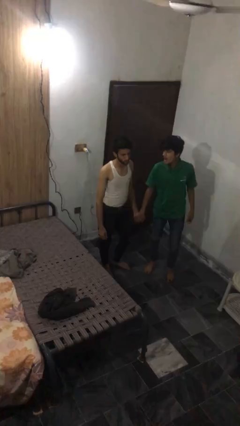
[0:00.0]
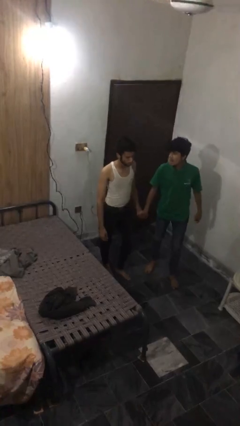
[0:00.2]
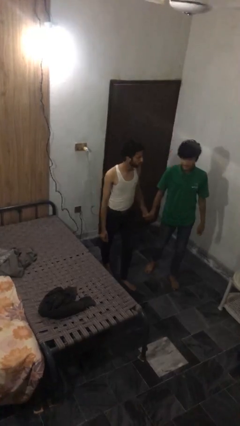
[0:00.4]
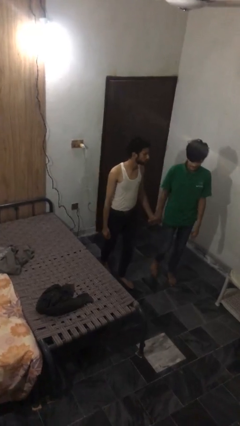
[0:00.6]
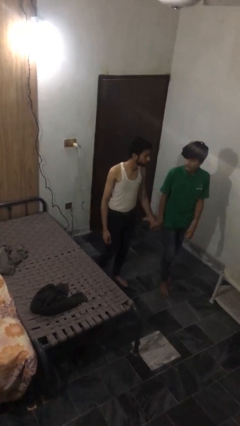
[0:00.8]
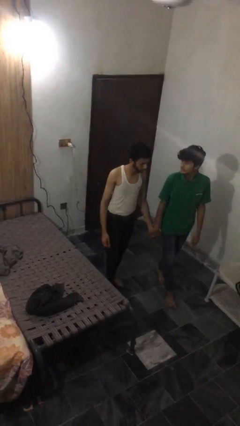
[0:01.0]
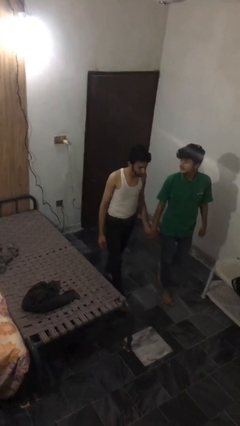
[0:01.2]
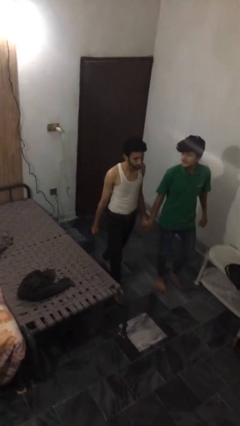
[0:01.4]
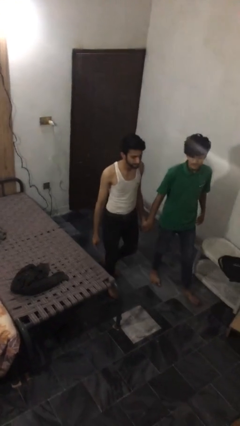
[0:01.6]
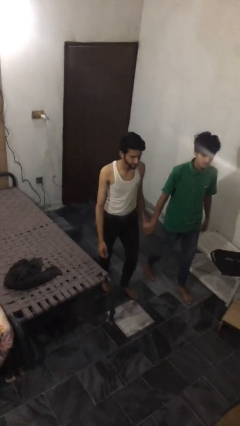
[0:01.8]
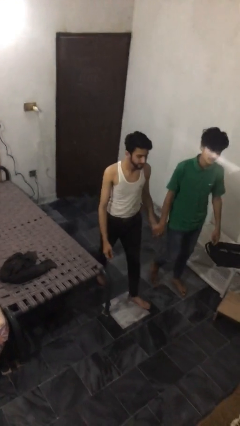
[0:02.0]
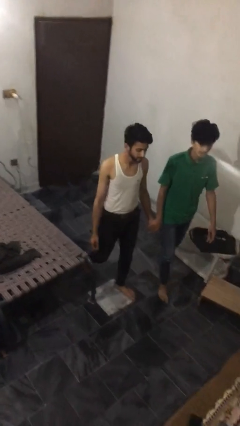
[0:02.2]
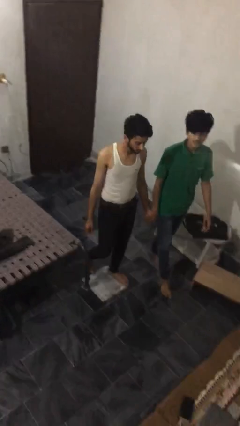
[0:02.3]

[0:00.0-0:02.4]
person holds hand

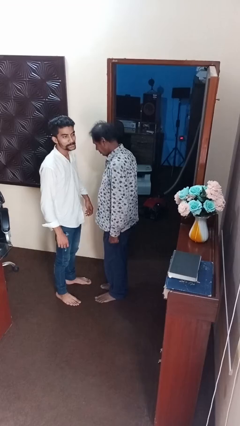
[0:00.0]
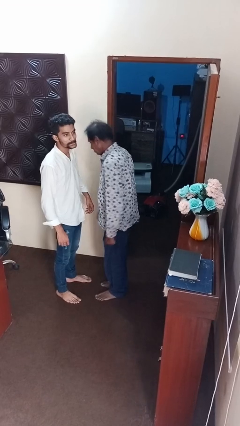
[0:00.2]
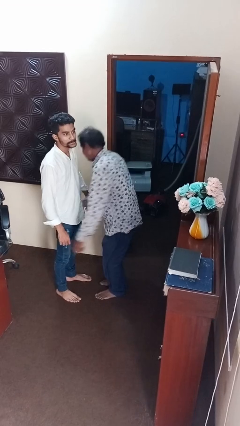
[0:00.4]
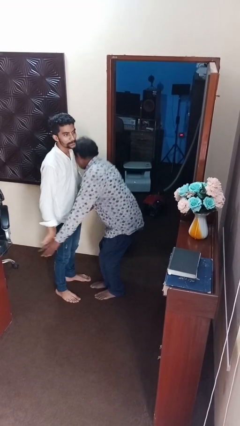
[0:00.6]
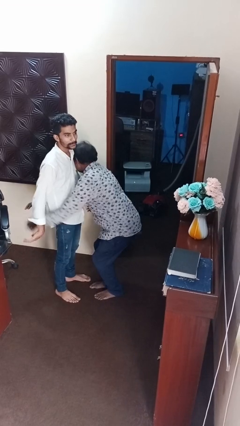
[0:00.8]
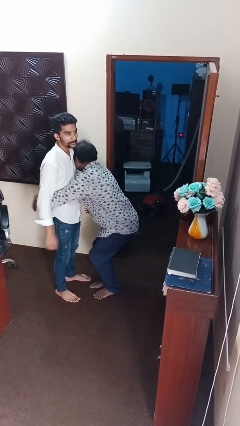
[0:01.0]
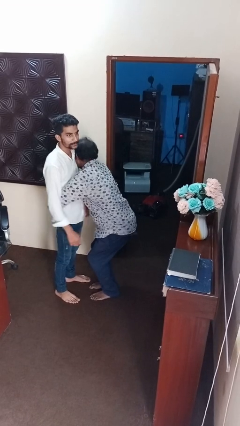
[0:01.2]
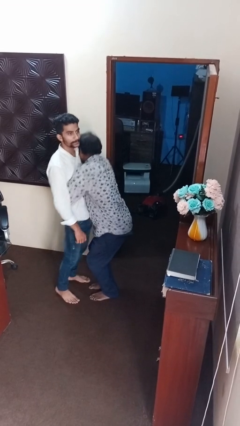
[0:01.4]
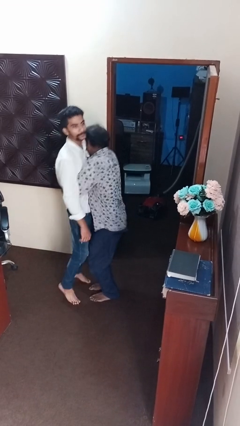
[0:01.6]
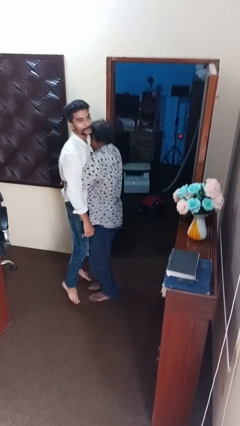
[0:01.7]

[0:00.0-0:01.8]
person picks up person

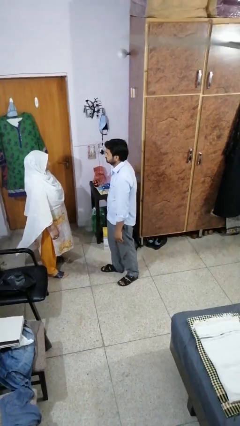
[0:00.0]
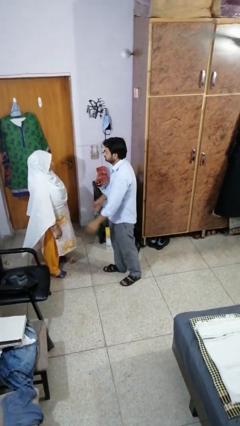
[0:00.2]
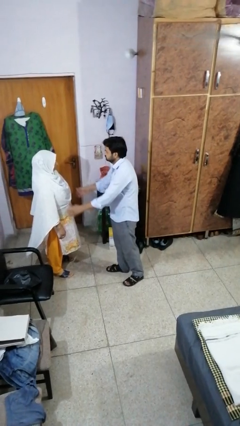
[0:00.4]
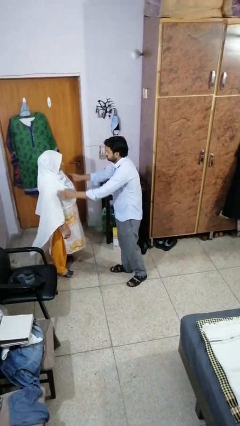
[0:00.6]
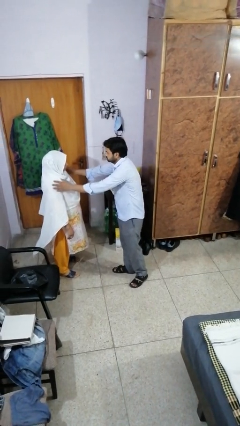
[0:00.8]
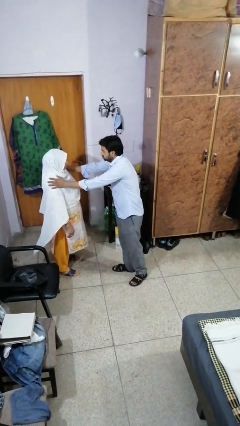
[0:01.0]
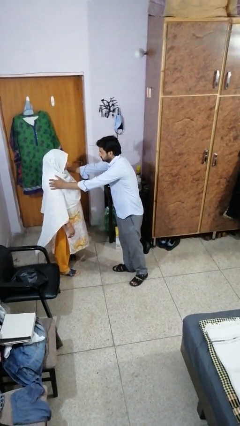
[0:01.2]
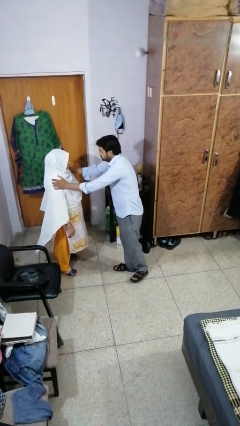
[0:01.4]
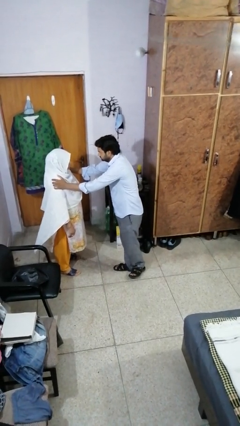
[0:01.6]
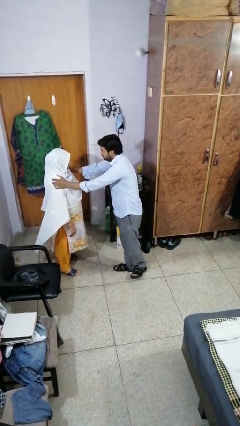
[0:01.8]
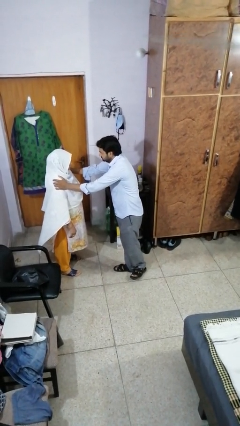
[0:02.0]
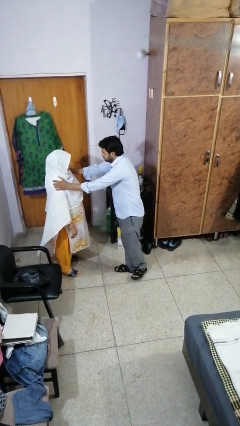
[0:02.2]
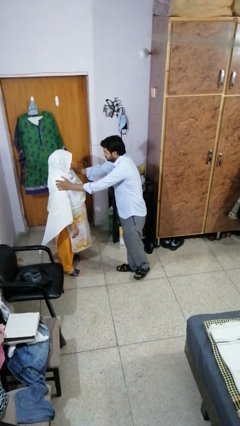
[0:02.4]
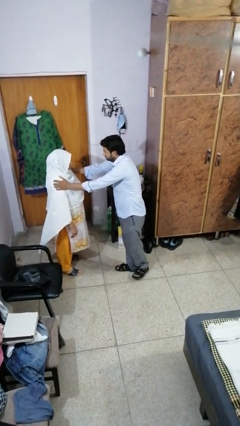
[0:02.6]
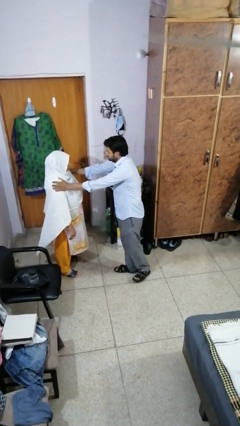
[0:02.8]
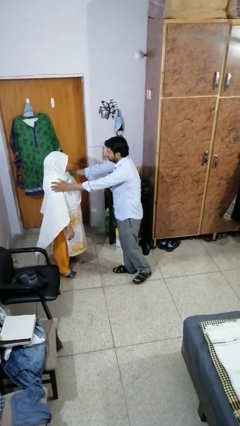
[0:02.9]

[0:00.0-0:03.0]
person pounds shoulders of person

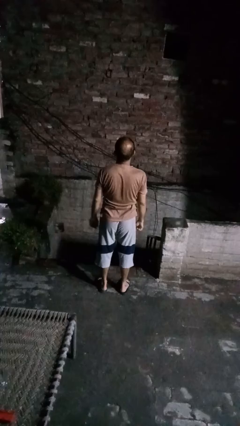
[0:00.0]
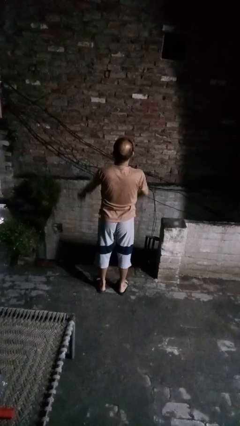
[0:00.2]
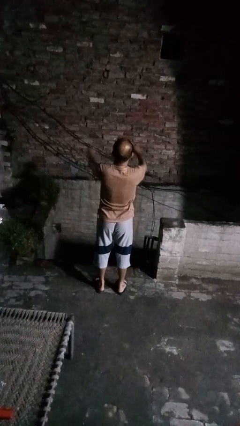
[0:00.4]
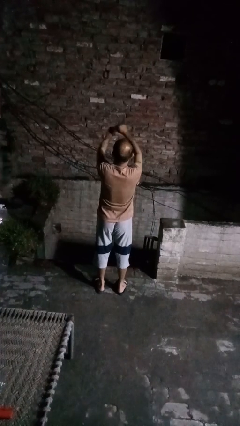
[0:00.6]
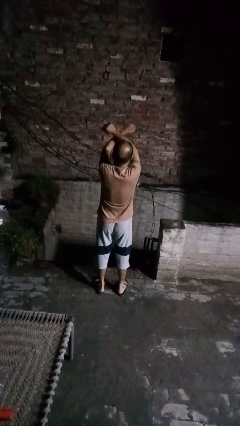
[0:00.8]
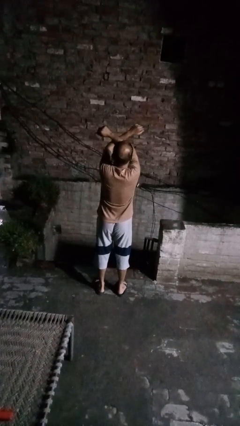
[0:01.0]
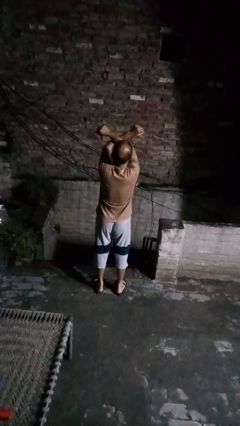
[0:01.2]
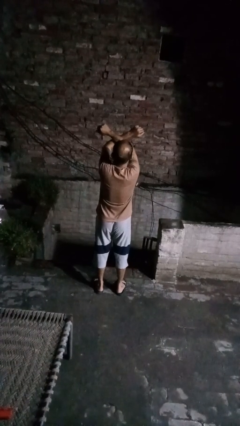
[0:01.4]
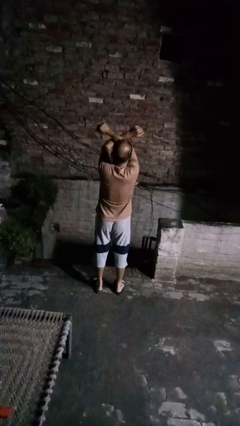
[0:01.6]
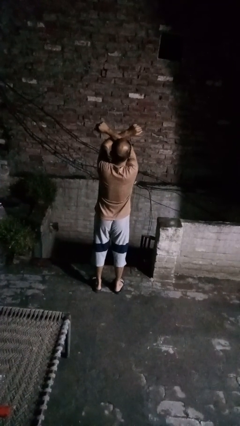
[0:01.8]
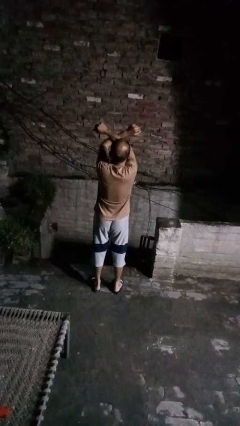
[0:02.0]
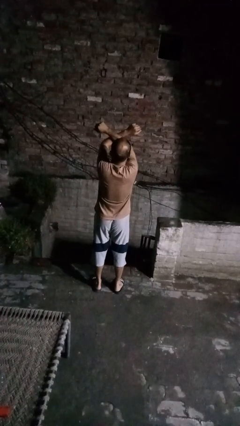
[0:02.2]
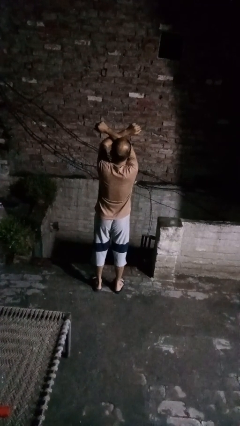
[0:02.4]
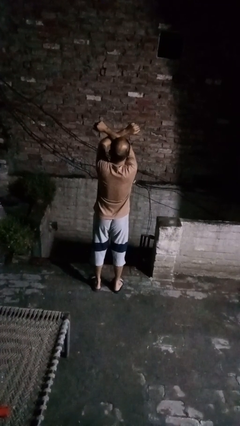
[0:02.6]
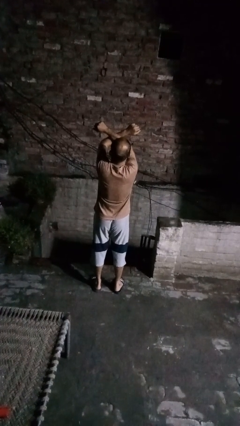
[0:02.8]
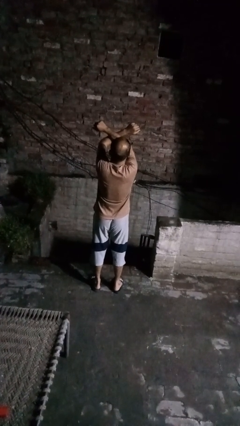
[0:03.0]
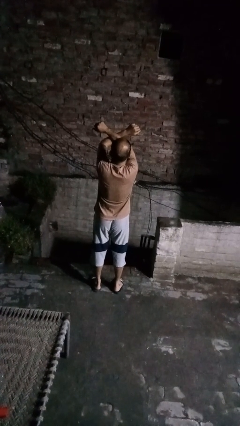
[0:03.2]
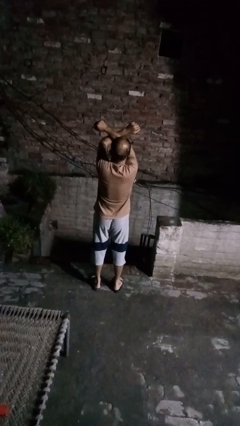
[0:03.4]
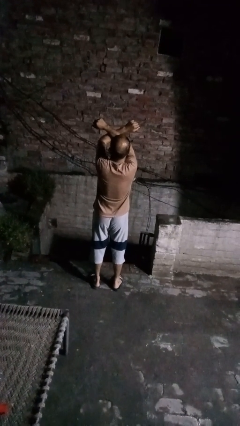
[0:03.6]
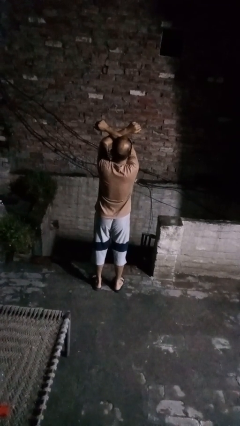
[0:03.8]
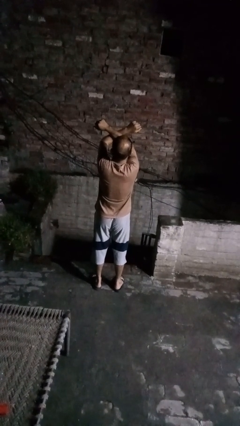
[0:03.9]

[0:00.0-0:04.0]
person gestures arms x

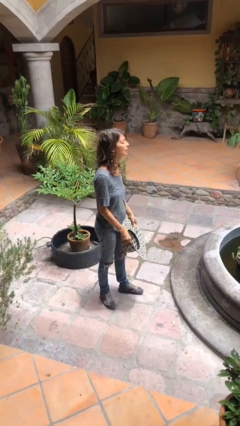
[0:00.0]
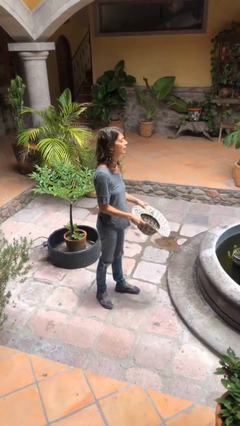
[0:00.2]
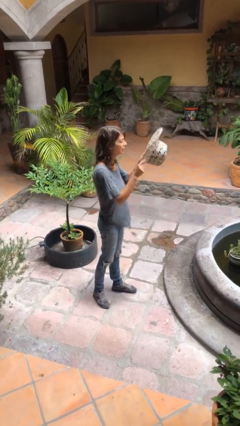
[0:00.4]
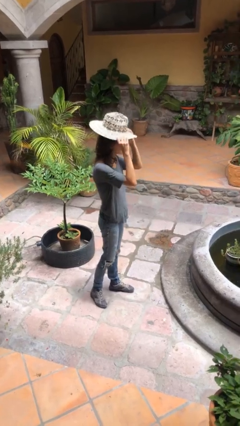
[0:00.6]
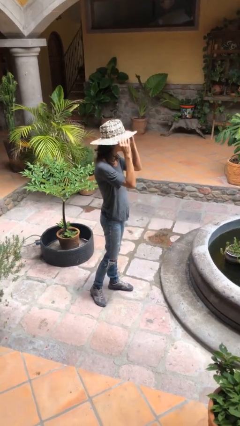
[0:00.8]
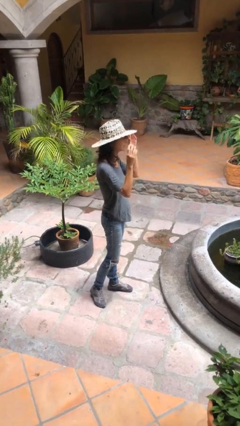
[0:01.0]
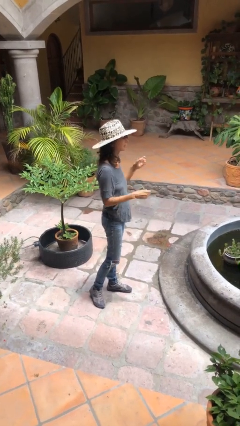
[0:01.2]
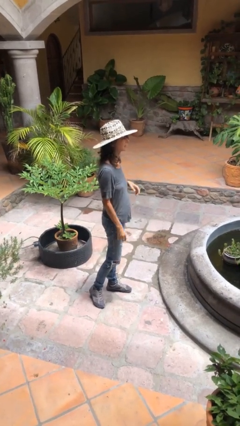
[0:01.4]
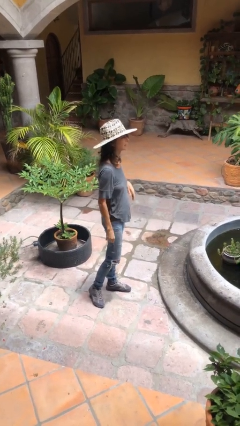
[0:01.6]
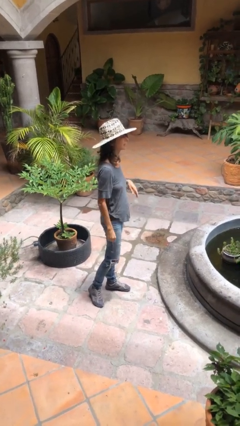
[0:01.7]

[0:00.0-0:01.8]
person puts on hat

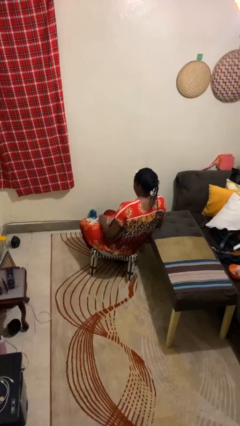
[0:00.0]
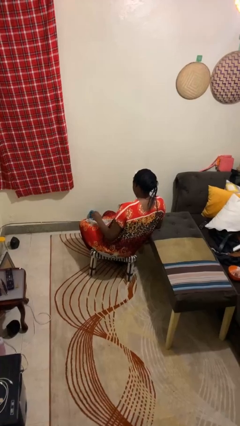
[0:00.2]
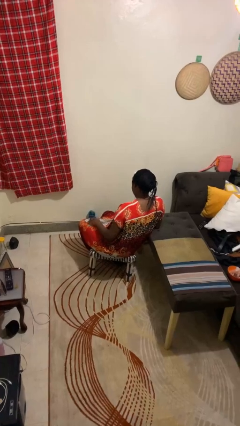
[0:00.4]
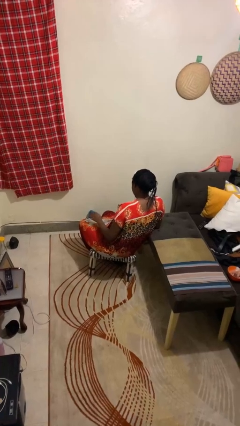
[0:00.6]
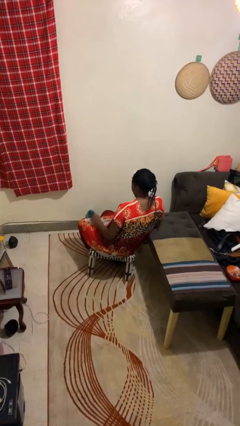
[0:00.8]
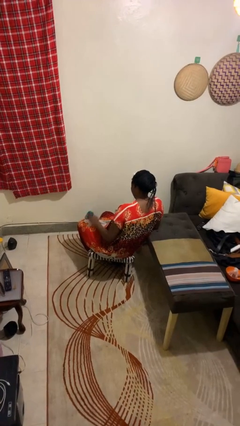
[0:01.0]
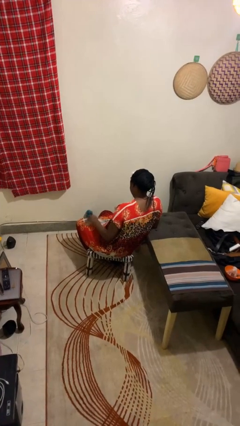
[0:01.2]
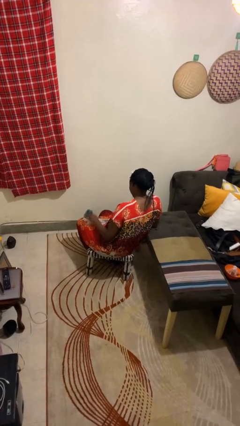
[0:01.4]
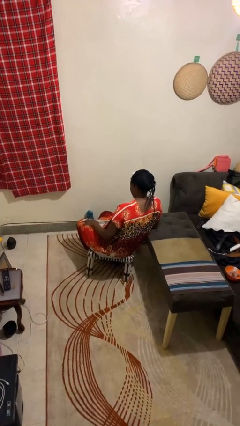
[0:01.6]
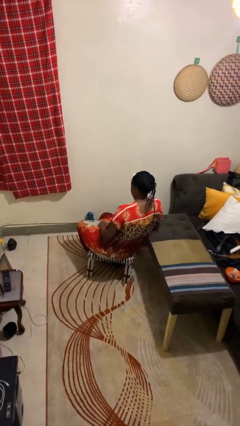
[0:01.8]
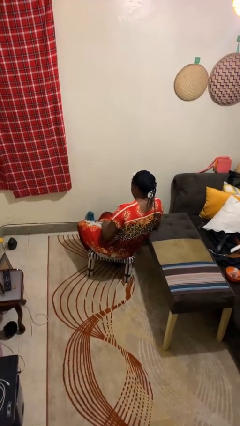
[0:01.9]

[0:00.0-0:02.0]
person slaps hands on thighs

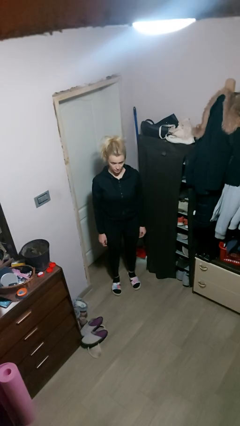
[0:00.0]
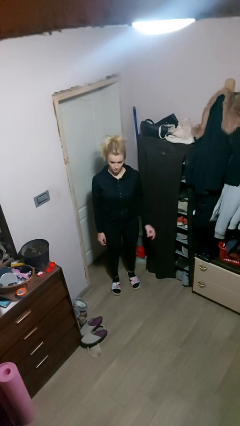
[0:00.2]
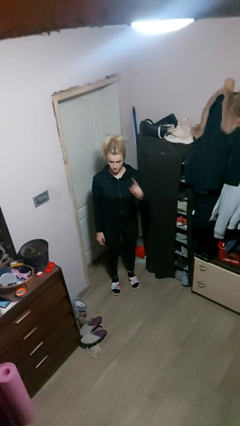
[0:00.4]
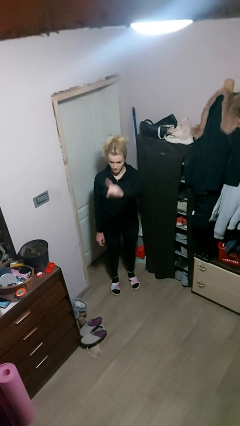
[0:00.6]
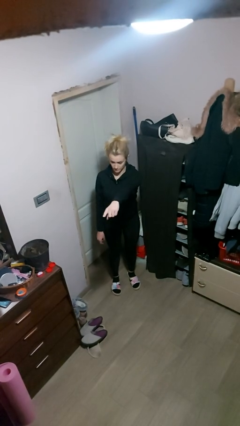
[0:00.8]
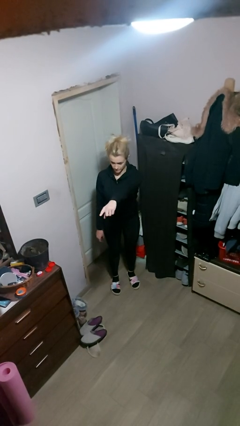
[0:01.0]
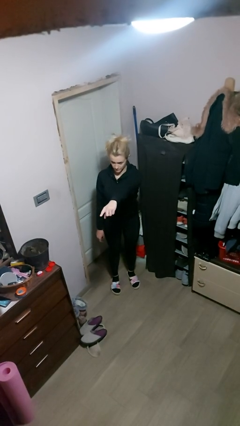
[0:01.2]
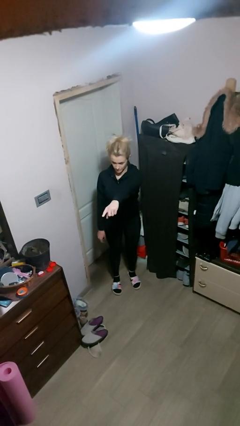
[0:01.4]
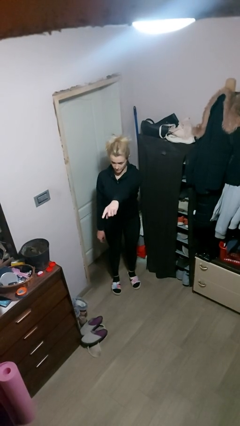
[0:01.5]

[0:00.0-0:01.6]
person points at person

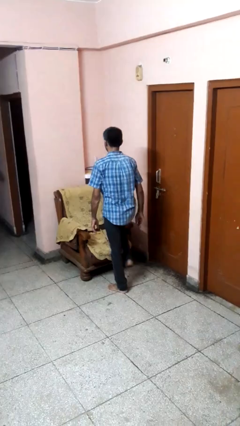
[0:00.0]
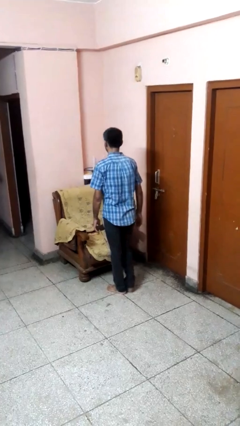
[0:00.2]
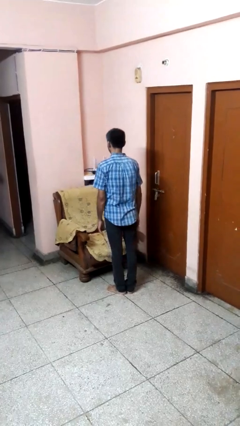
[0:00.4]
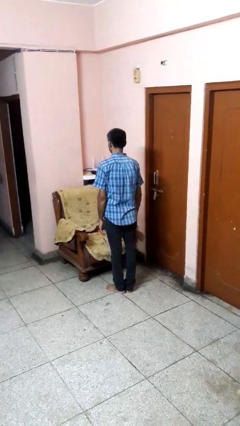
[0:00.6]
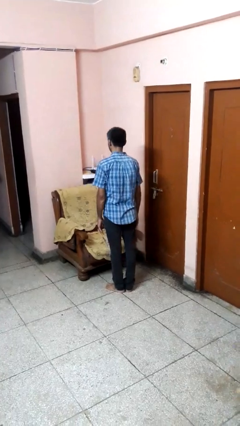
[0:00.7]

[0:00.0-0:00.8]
person climbs off couch
